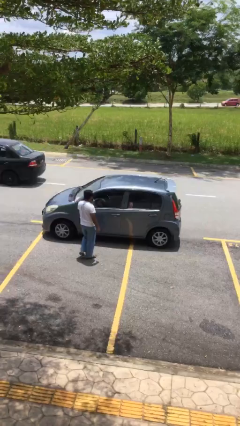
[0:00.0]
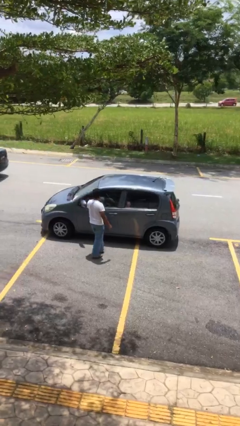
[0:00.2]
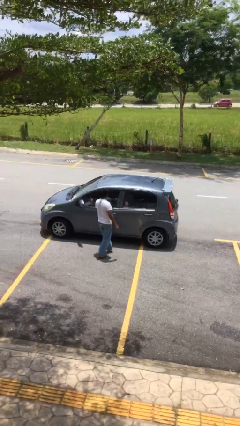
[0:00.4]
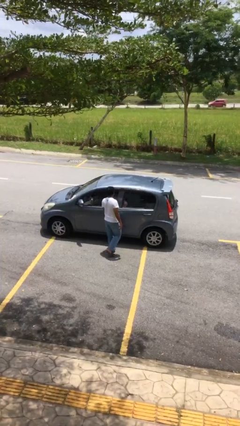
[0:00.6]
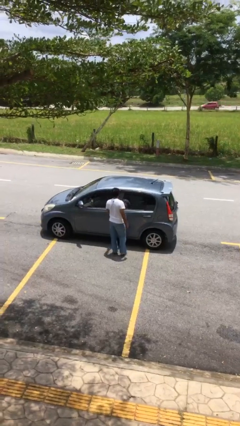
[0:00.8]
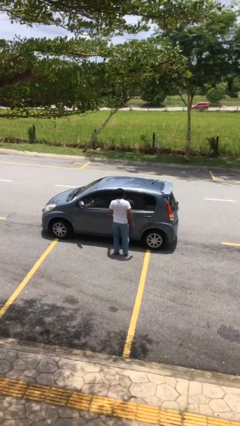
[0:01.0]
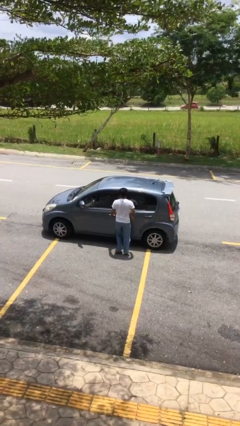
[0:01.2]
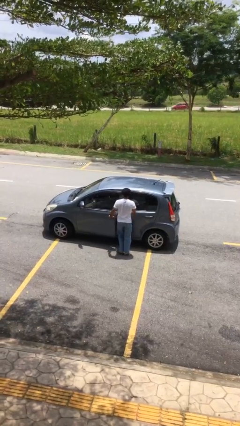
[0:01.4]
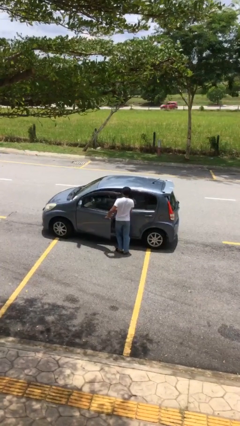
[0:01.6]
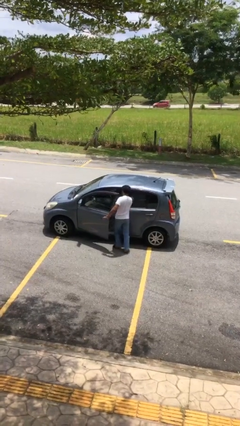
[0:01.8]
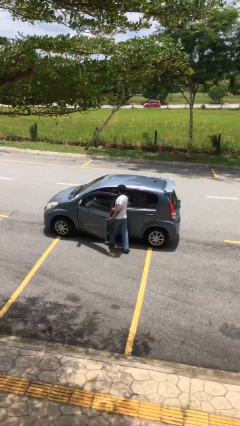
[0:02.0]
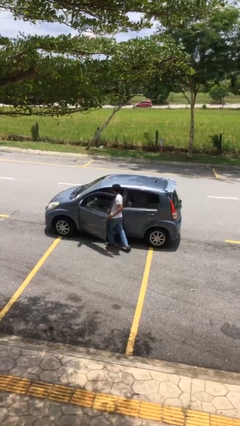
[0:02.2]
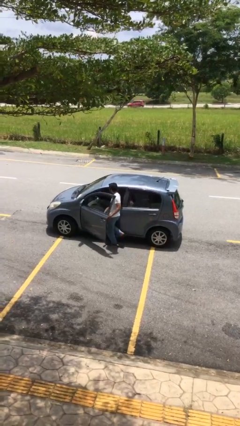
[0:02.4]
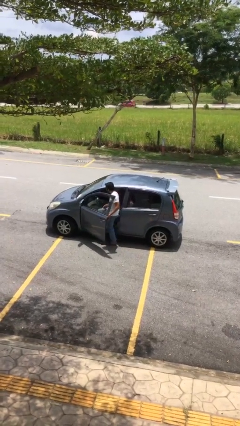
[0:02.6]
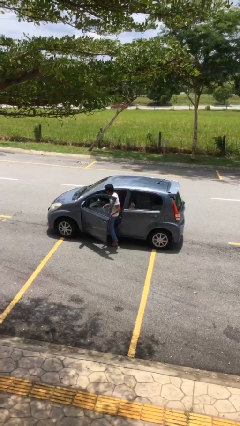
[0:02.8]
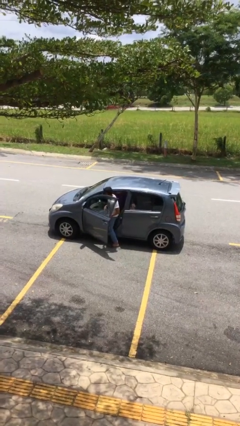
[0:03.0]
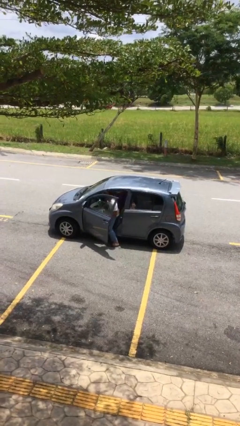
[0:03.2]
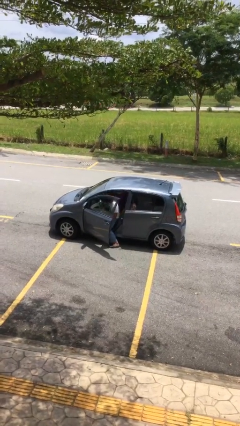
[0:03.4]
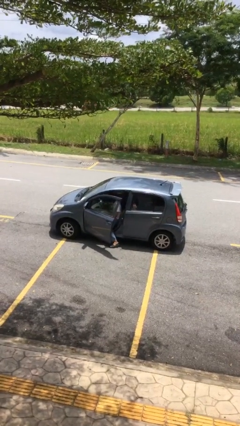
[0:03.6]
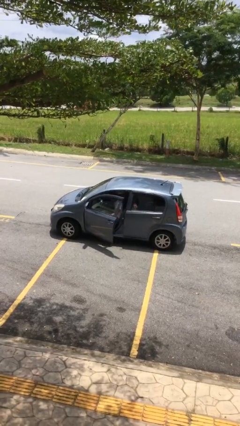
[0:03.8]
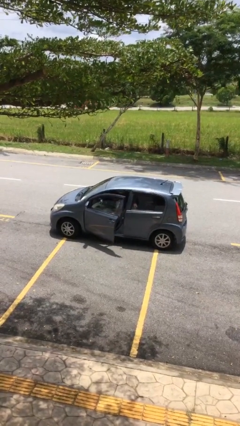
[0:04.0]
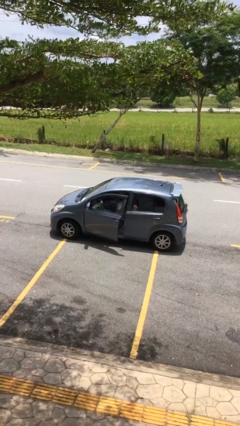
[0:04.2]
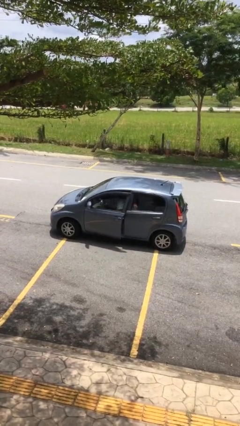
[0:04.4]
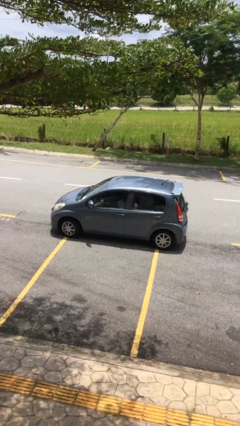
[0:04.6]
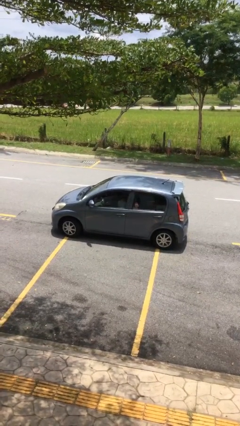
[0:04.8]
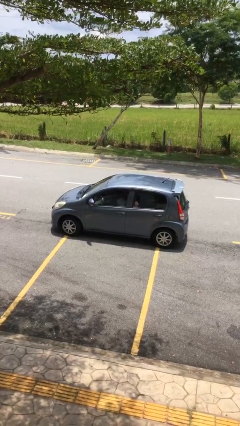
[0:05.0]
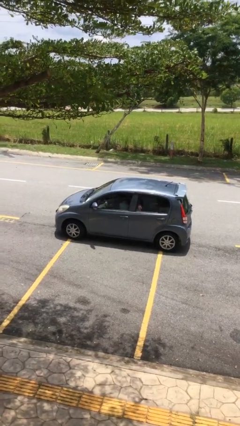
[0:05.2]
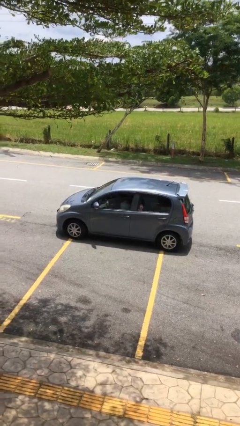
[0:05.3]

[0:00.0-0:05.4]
car picks up person

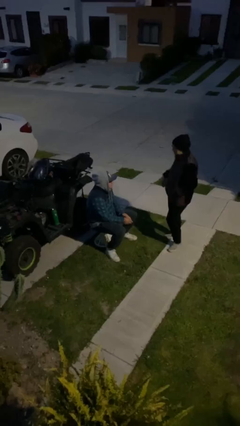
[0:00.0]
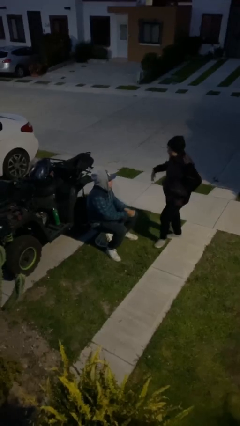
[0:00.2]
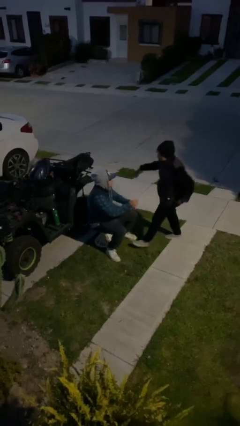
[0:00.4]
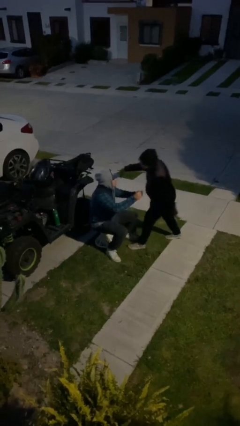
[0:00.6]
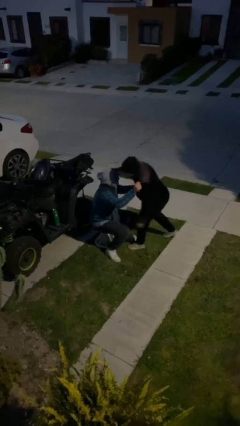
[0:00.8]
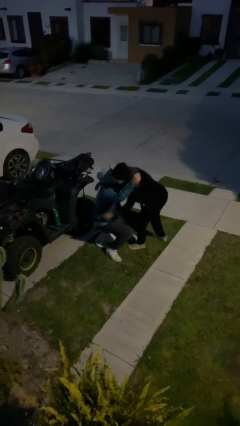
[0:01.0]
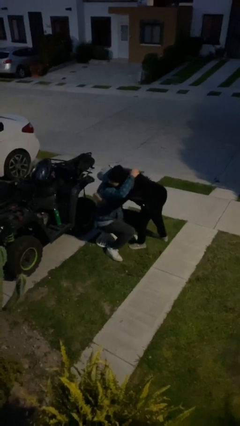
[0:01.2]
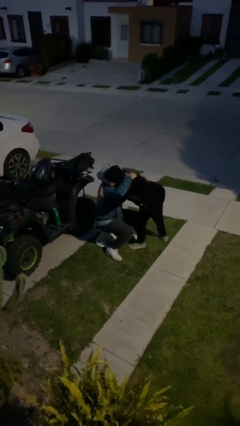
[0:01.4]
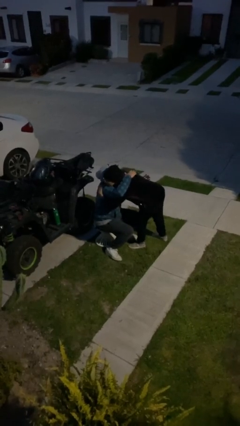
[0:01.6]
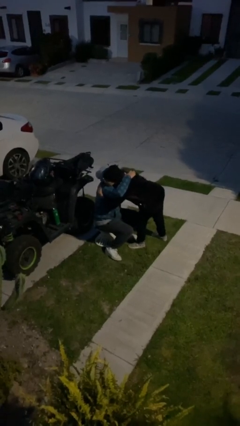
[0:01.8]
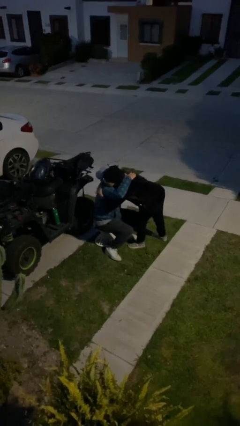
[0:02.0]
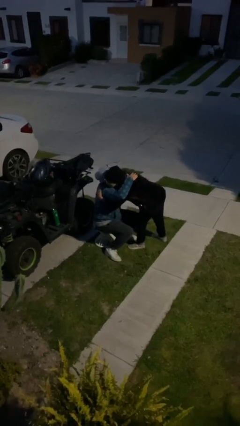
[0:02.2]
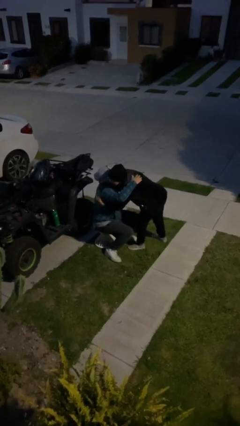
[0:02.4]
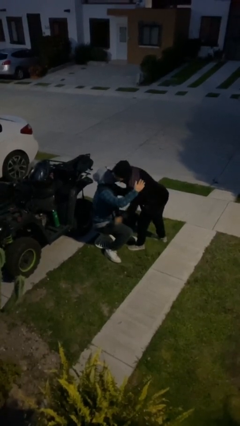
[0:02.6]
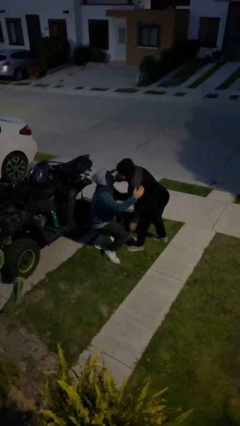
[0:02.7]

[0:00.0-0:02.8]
person embraces person

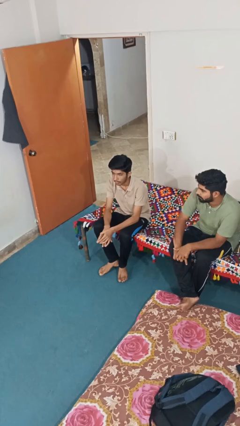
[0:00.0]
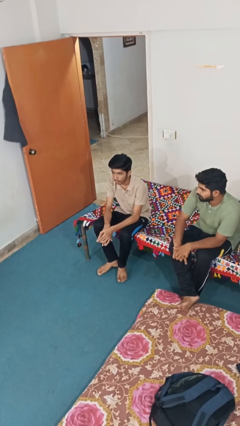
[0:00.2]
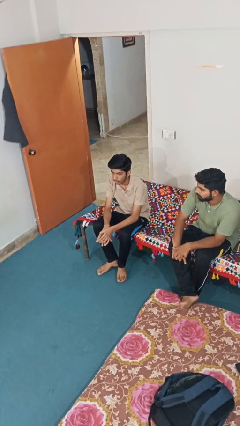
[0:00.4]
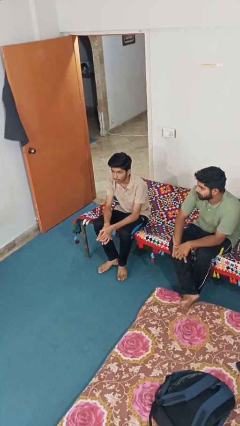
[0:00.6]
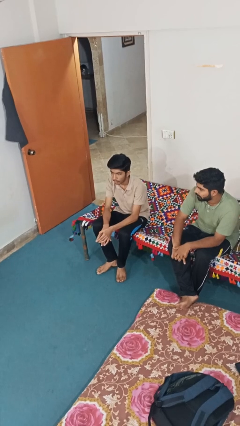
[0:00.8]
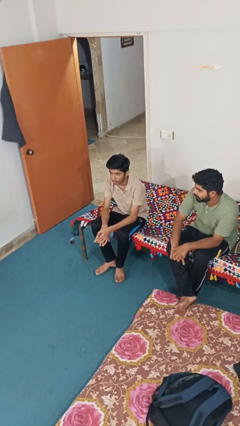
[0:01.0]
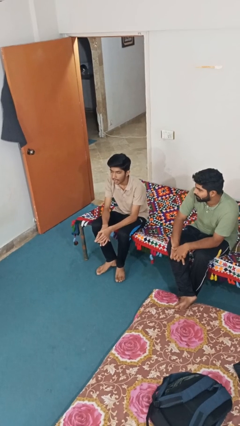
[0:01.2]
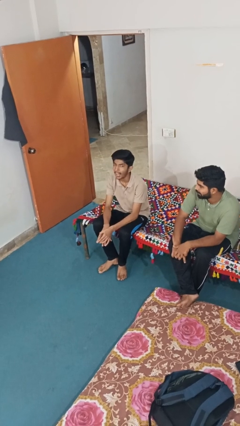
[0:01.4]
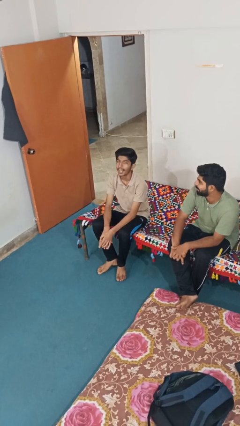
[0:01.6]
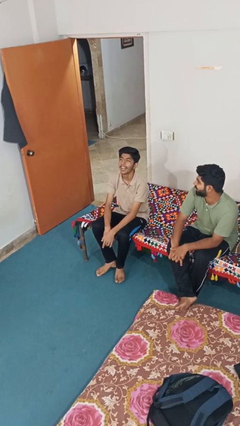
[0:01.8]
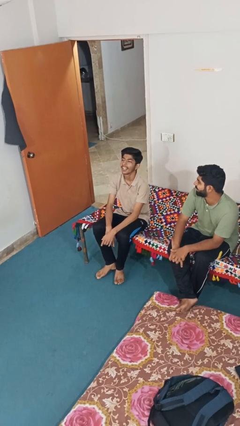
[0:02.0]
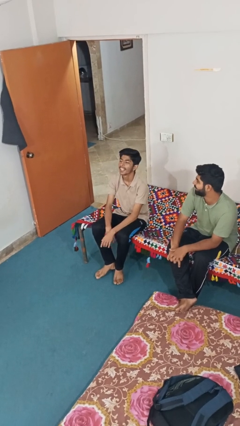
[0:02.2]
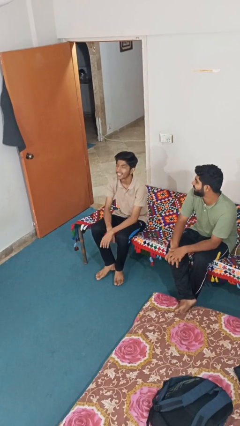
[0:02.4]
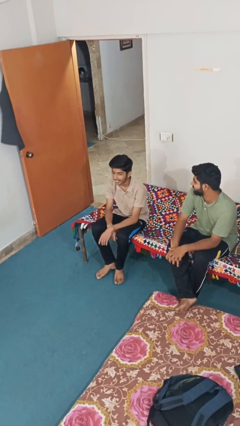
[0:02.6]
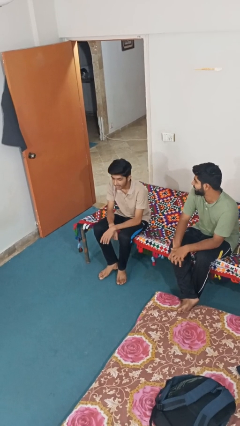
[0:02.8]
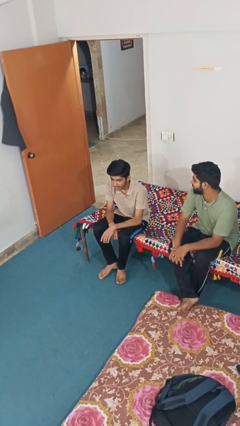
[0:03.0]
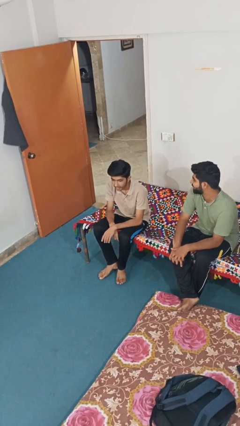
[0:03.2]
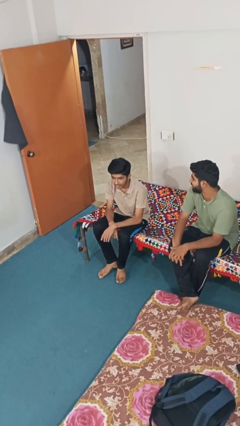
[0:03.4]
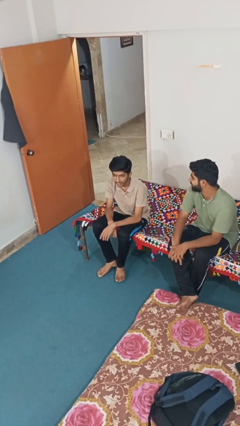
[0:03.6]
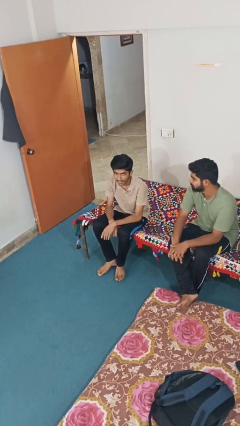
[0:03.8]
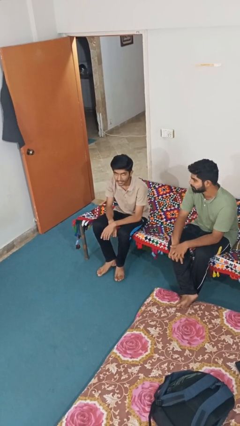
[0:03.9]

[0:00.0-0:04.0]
person laughs with person

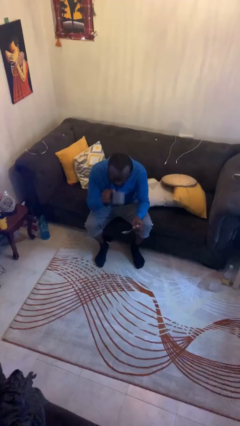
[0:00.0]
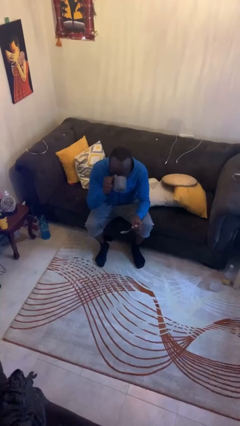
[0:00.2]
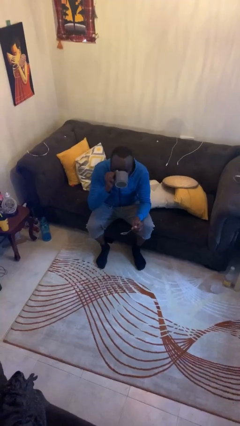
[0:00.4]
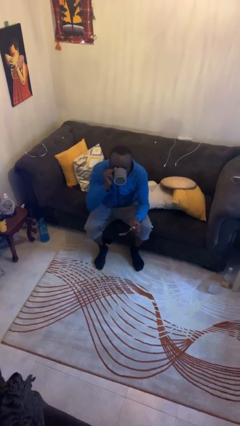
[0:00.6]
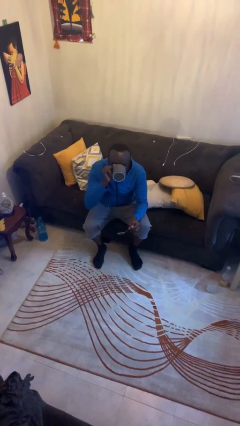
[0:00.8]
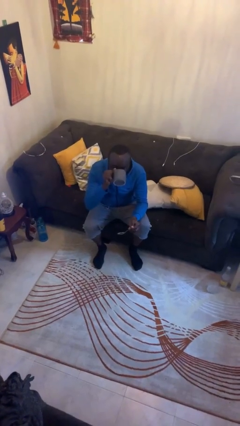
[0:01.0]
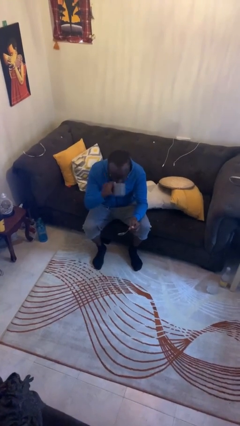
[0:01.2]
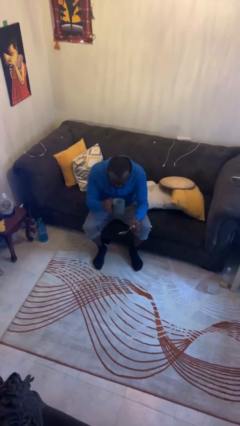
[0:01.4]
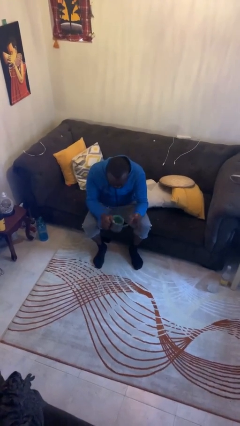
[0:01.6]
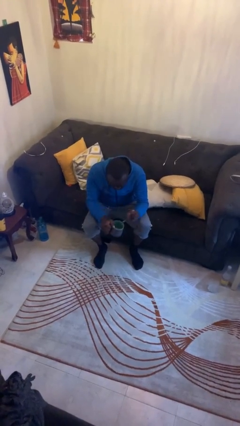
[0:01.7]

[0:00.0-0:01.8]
person drinks from mug

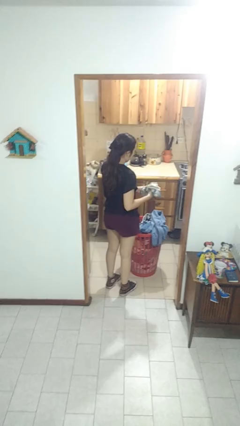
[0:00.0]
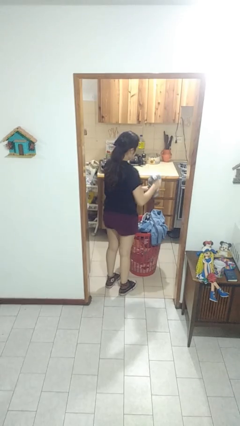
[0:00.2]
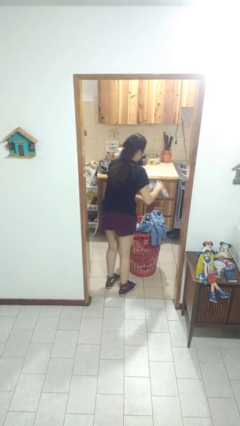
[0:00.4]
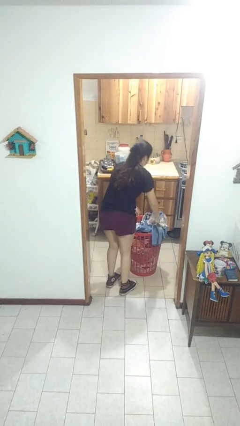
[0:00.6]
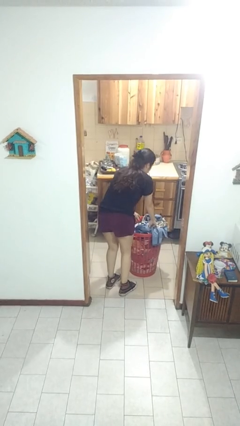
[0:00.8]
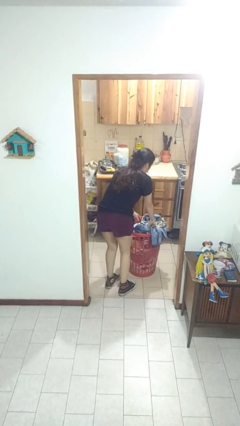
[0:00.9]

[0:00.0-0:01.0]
person puts object into basket

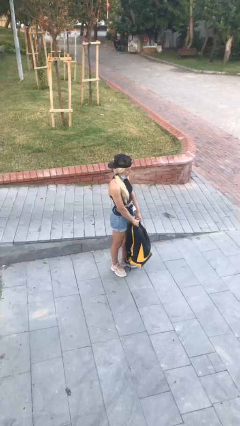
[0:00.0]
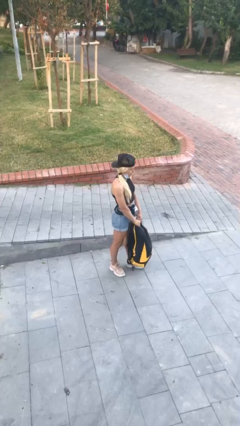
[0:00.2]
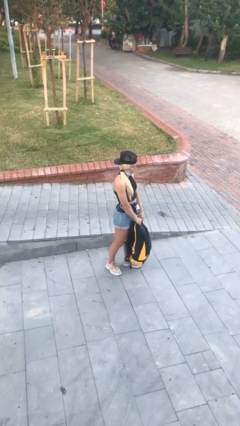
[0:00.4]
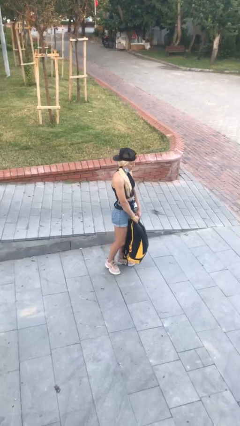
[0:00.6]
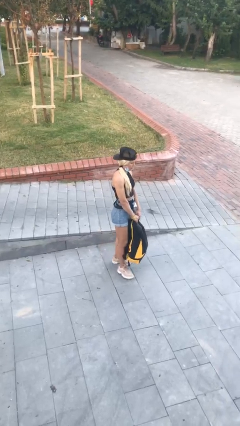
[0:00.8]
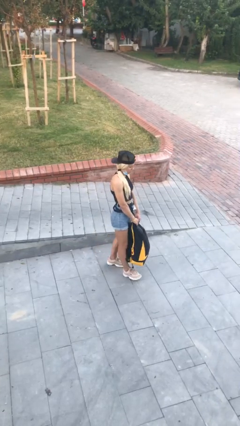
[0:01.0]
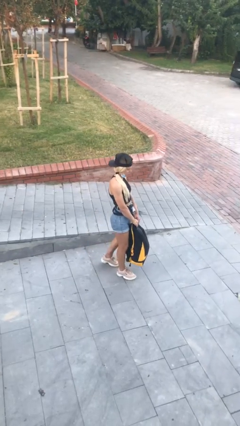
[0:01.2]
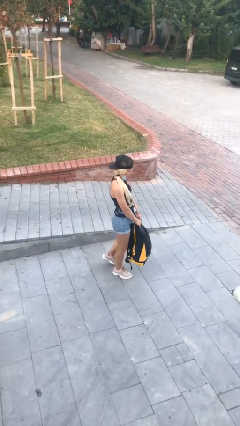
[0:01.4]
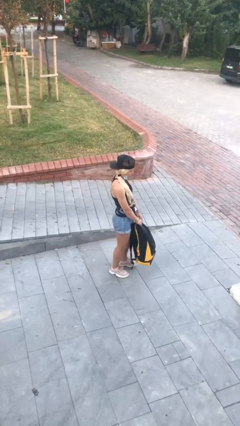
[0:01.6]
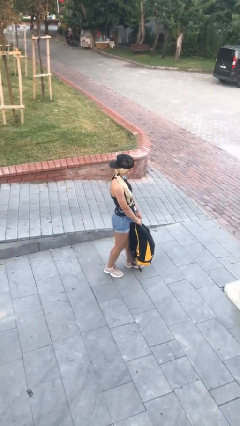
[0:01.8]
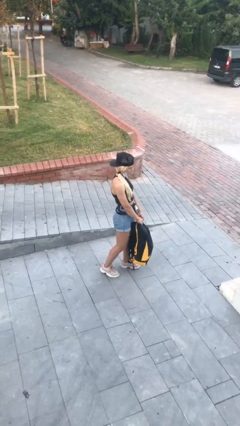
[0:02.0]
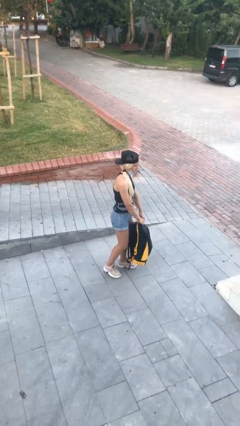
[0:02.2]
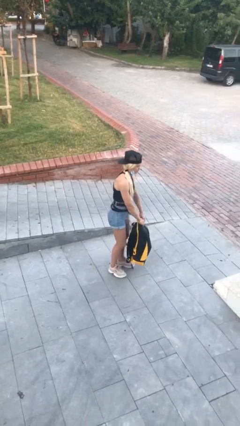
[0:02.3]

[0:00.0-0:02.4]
person carries heavy object
